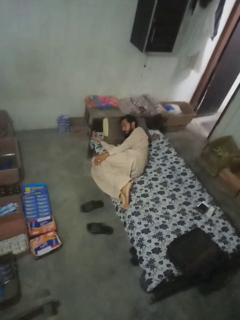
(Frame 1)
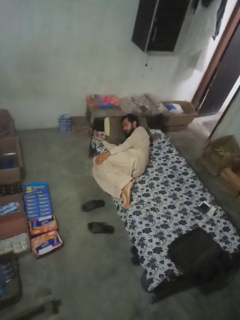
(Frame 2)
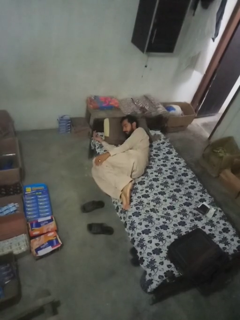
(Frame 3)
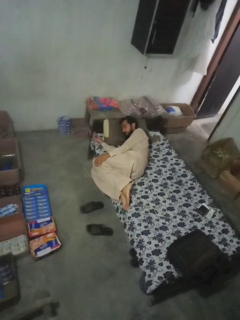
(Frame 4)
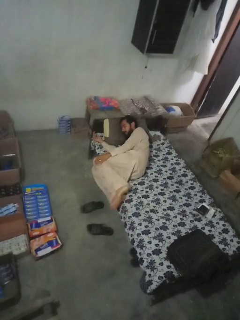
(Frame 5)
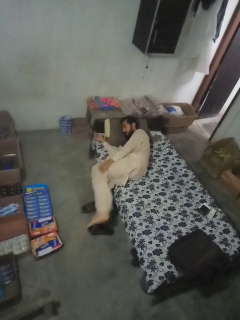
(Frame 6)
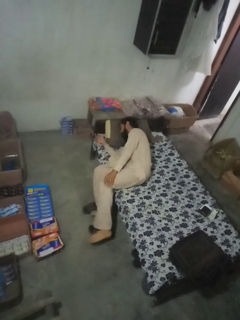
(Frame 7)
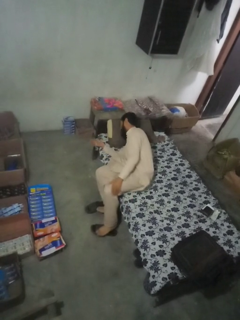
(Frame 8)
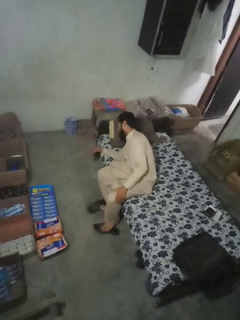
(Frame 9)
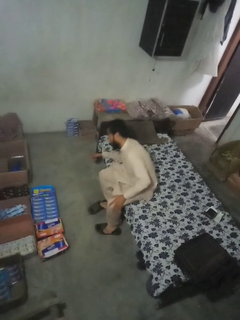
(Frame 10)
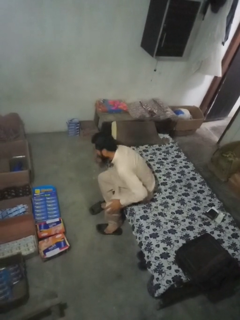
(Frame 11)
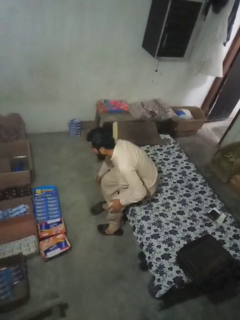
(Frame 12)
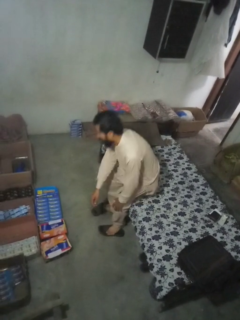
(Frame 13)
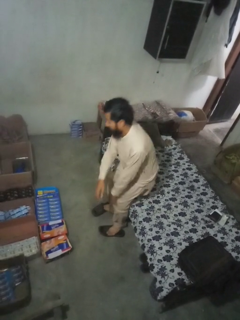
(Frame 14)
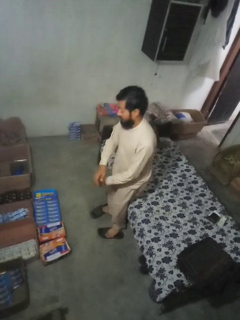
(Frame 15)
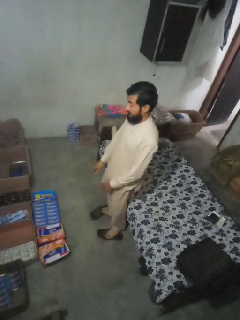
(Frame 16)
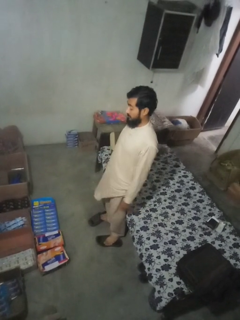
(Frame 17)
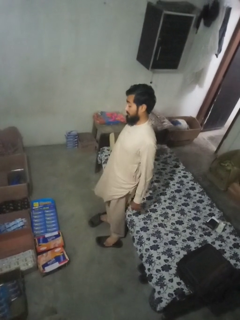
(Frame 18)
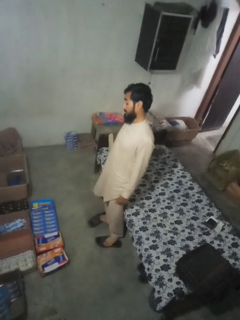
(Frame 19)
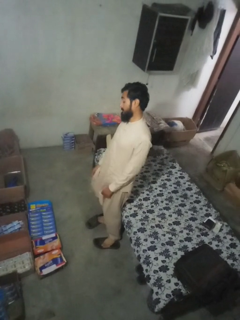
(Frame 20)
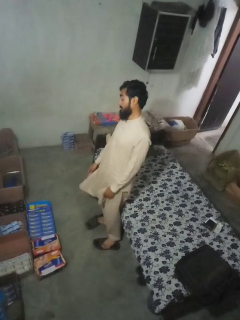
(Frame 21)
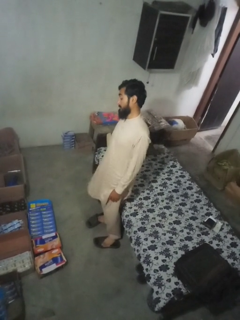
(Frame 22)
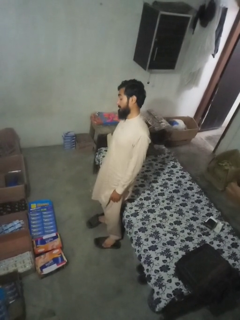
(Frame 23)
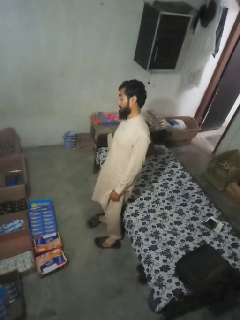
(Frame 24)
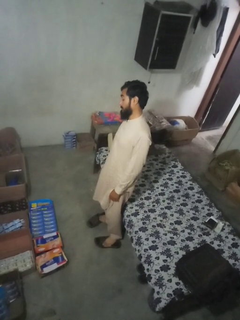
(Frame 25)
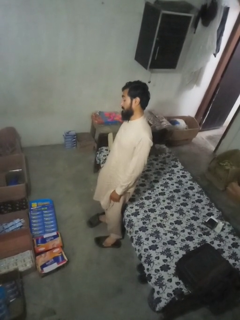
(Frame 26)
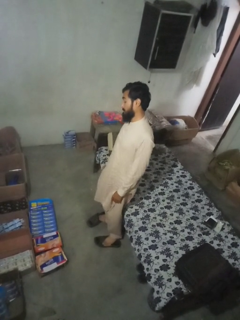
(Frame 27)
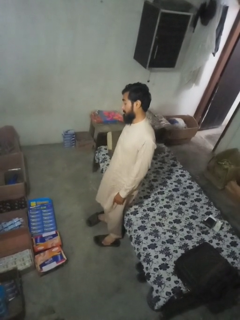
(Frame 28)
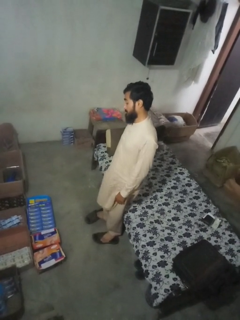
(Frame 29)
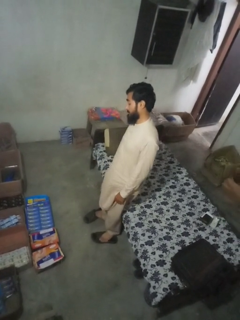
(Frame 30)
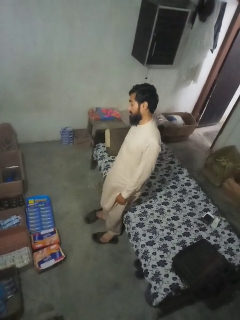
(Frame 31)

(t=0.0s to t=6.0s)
person stands up

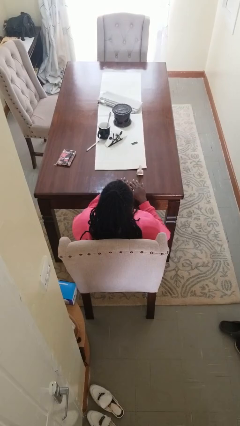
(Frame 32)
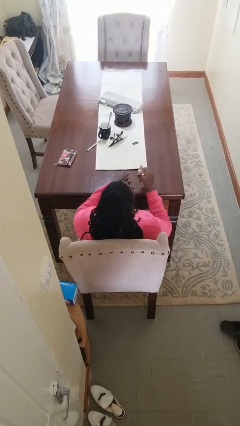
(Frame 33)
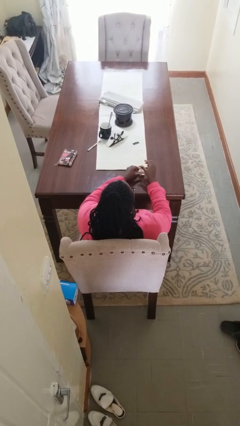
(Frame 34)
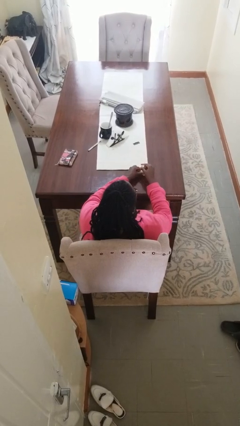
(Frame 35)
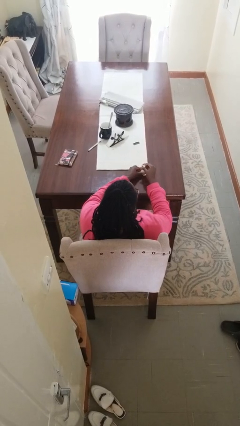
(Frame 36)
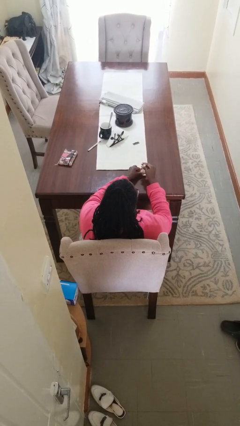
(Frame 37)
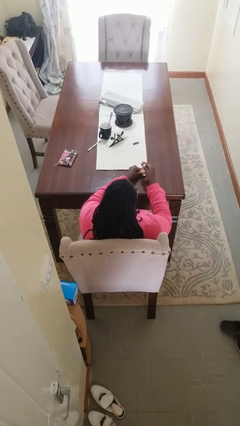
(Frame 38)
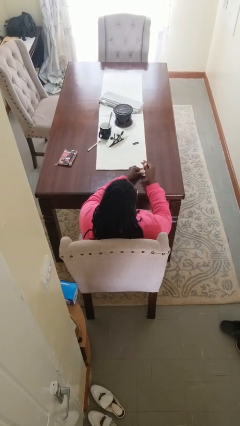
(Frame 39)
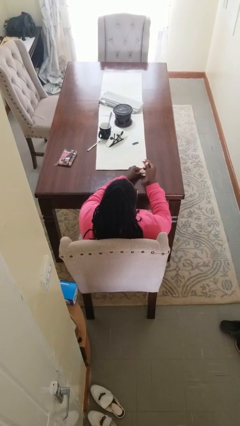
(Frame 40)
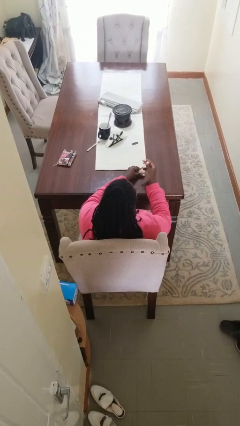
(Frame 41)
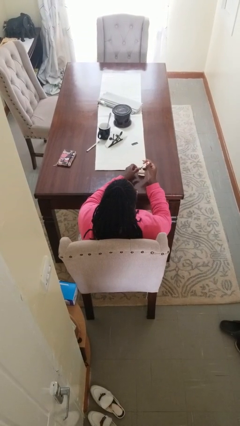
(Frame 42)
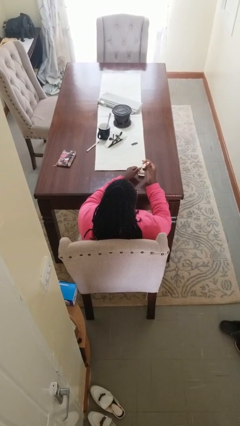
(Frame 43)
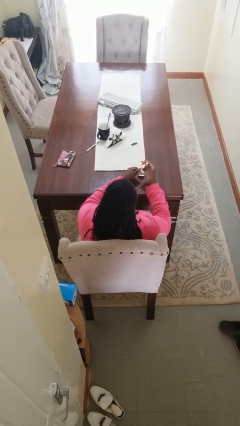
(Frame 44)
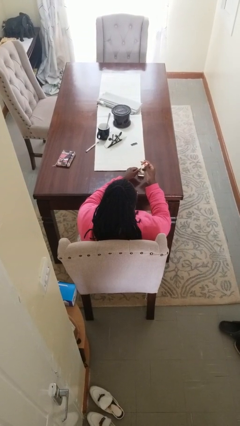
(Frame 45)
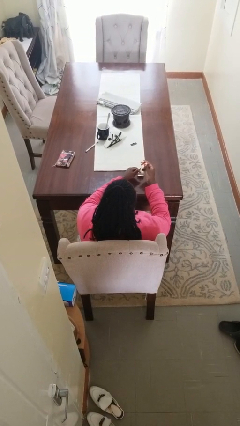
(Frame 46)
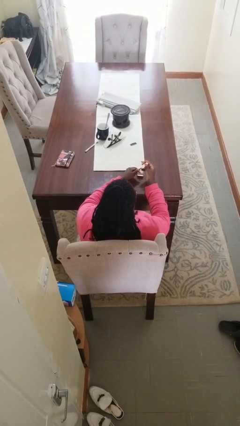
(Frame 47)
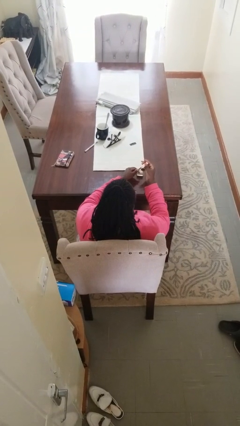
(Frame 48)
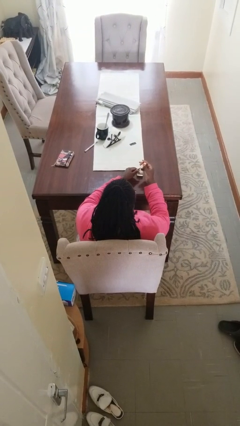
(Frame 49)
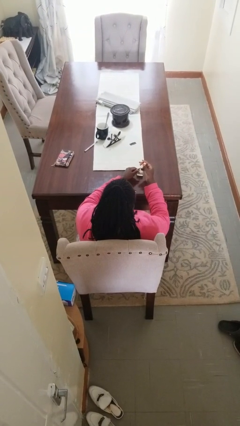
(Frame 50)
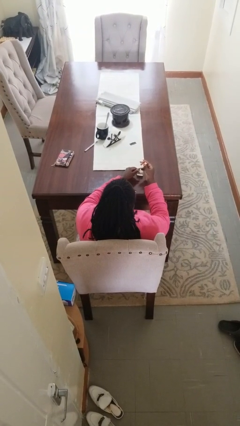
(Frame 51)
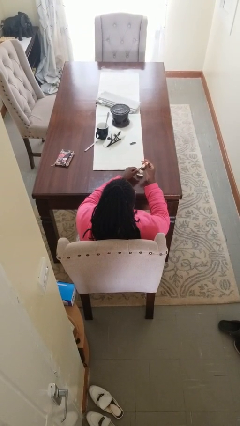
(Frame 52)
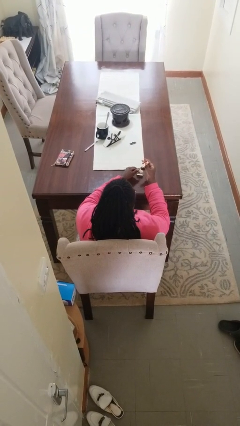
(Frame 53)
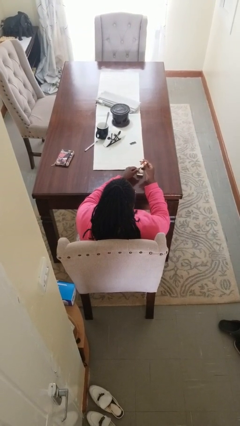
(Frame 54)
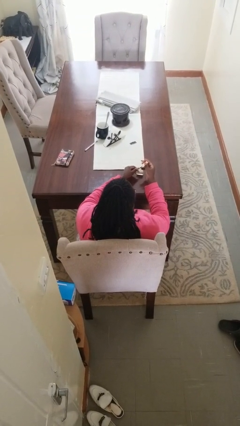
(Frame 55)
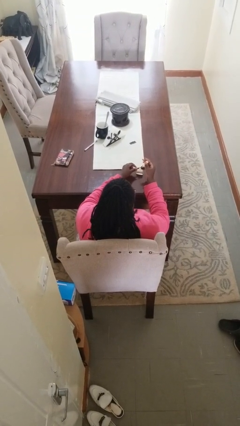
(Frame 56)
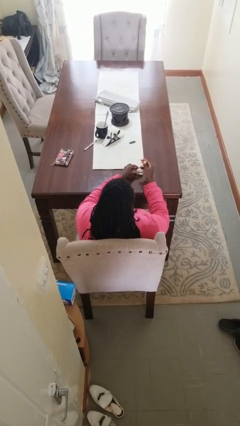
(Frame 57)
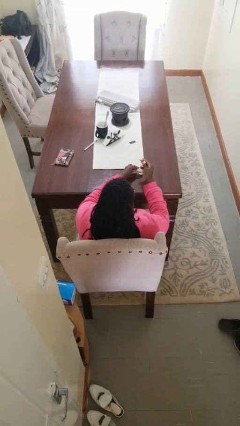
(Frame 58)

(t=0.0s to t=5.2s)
person paints fingernails

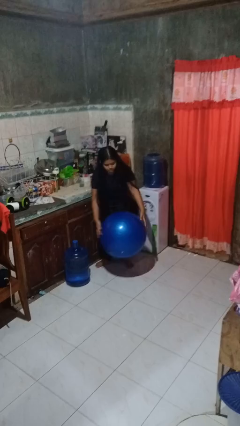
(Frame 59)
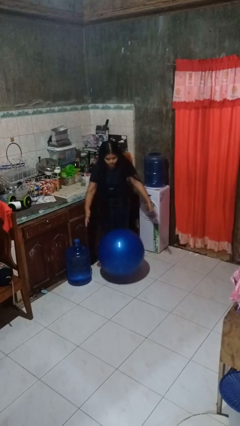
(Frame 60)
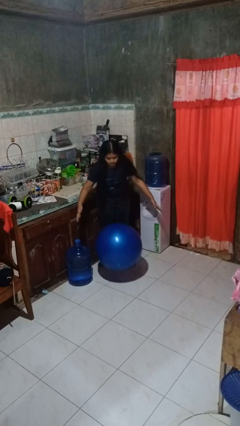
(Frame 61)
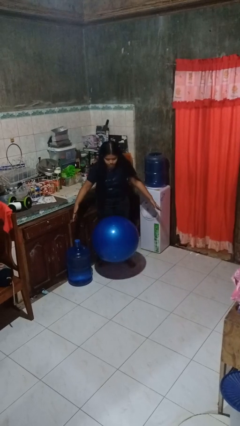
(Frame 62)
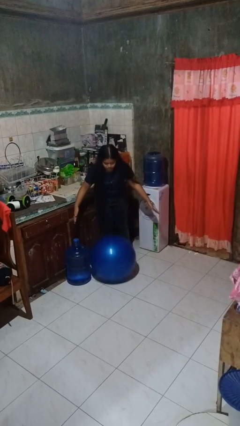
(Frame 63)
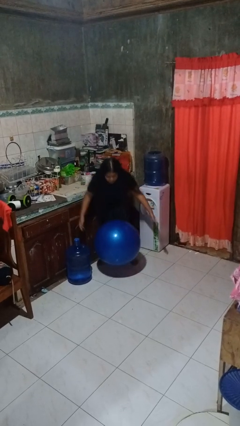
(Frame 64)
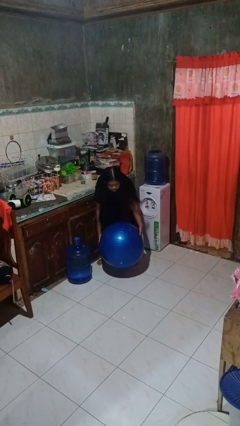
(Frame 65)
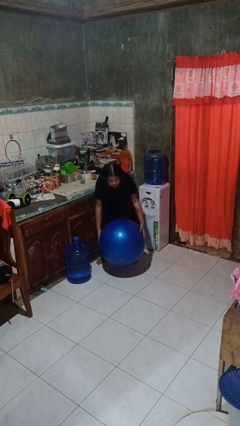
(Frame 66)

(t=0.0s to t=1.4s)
person bounces ball on floor

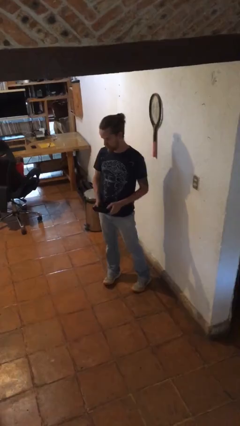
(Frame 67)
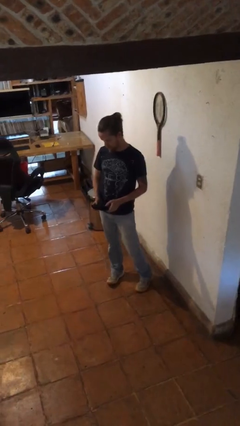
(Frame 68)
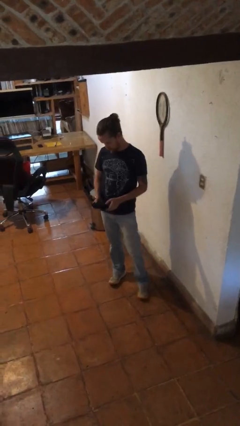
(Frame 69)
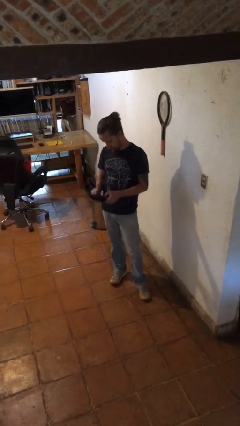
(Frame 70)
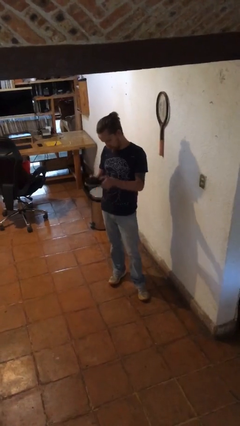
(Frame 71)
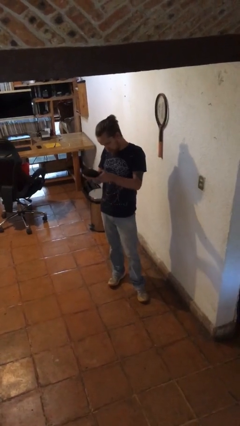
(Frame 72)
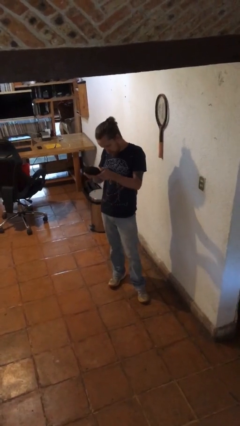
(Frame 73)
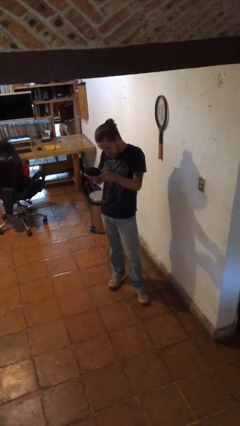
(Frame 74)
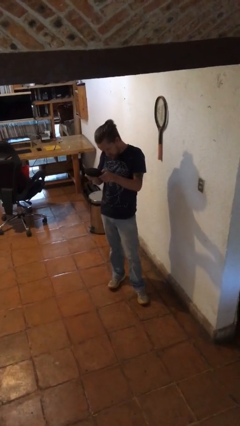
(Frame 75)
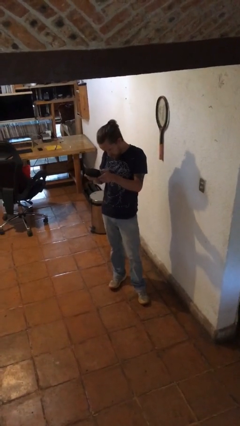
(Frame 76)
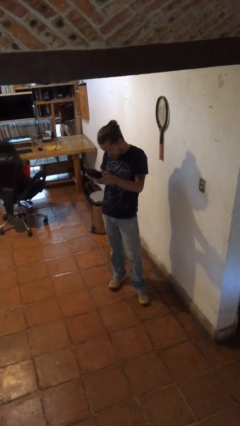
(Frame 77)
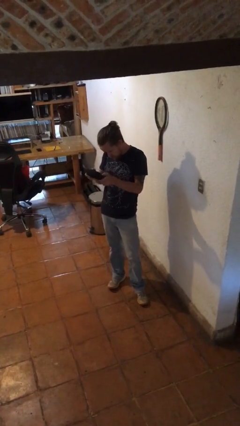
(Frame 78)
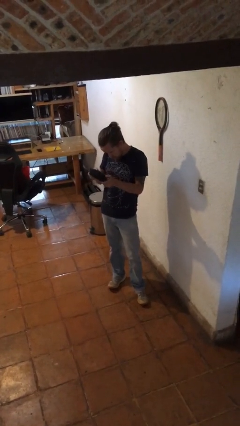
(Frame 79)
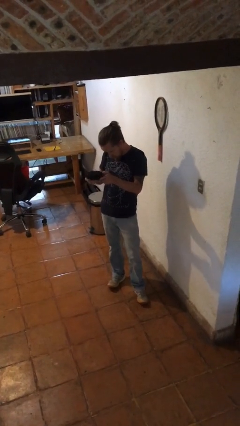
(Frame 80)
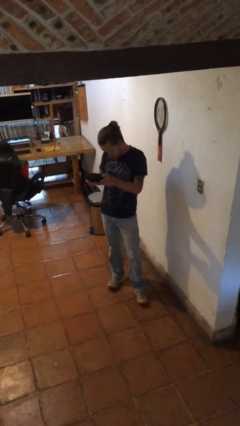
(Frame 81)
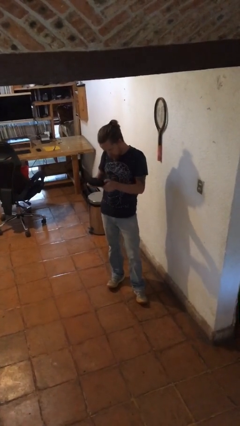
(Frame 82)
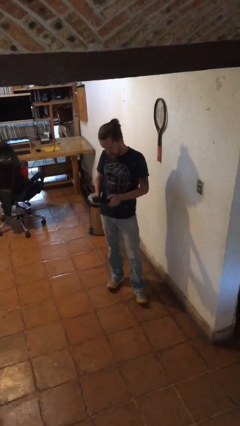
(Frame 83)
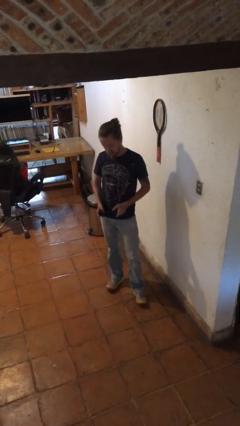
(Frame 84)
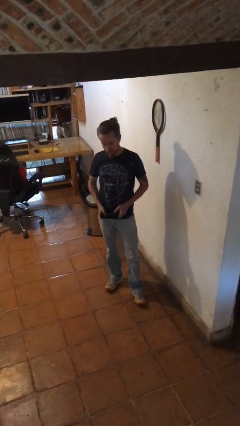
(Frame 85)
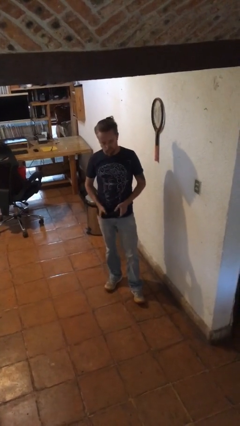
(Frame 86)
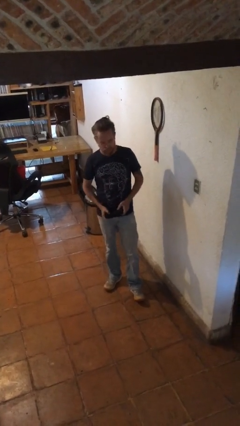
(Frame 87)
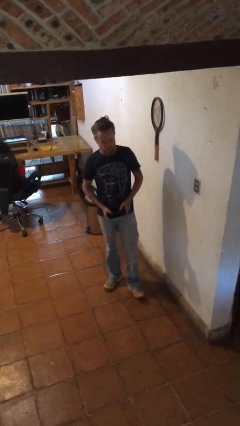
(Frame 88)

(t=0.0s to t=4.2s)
person interacts with handheld game

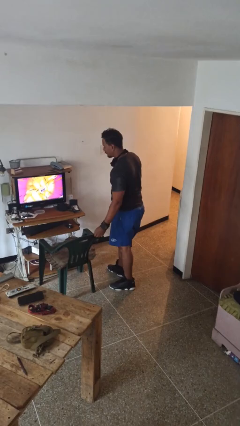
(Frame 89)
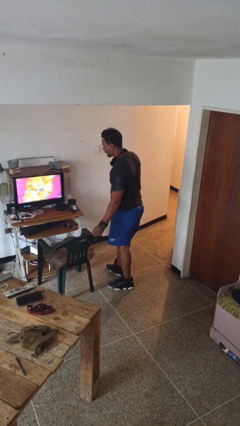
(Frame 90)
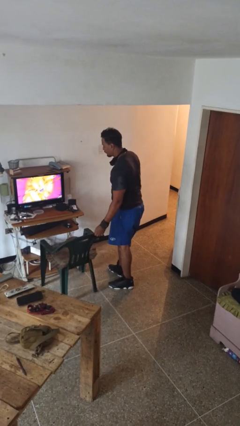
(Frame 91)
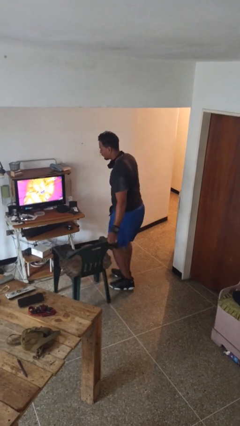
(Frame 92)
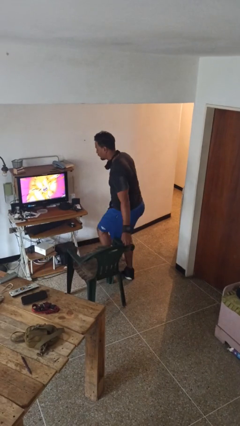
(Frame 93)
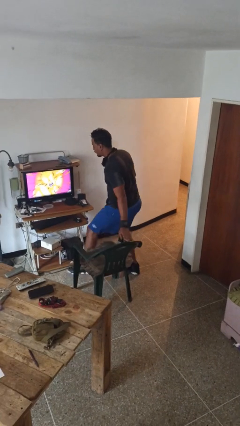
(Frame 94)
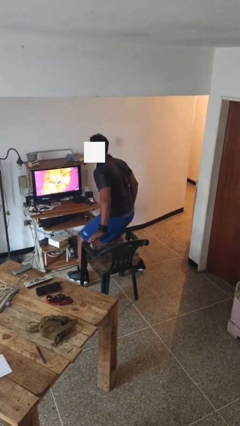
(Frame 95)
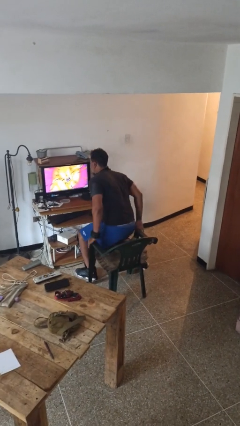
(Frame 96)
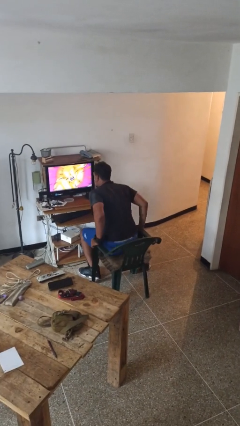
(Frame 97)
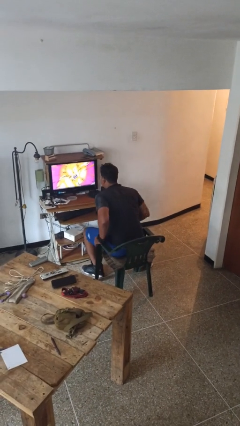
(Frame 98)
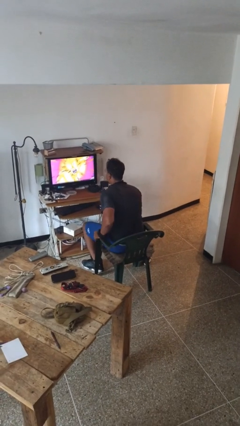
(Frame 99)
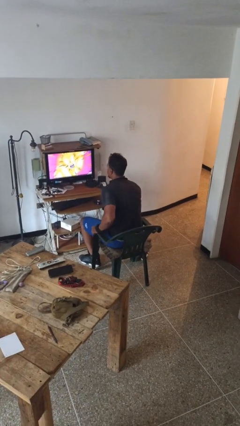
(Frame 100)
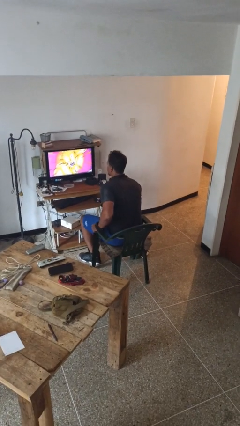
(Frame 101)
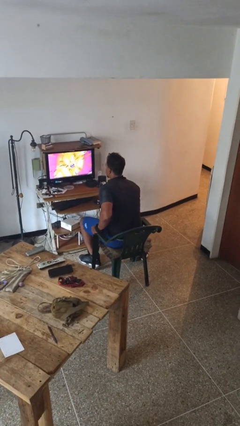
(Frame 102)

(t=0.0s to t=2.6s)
person sits down
